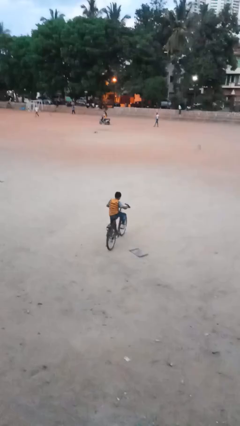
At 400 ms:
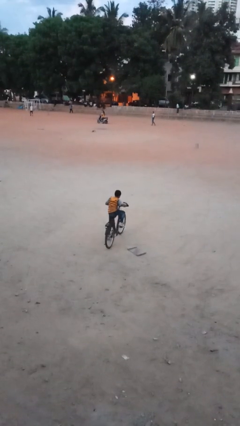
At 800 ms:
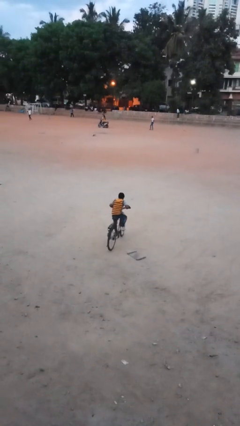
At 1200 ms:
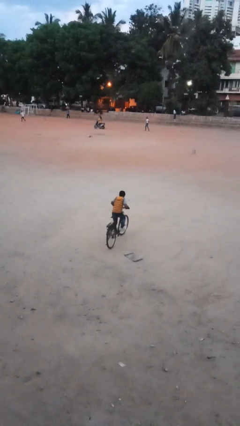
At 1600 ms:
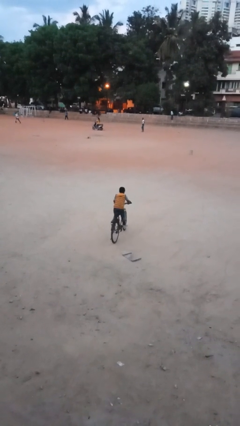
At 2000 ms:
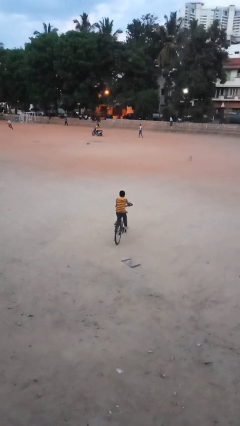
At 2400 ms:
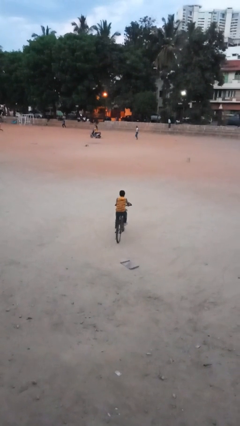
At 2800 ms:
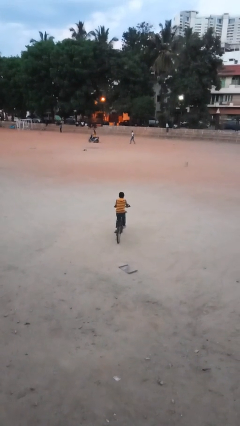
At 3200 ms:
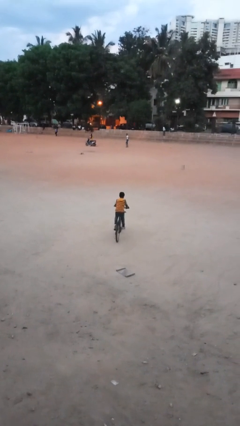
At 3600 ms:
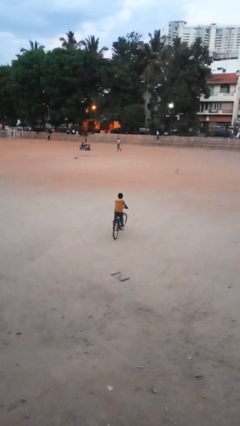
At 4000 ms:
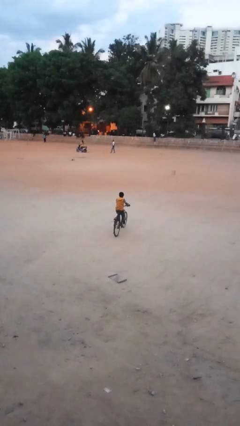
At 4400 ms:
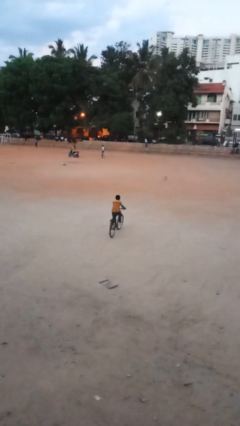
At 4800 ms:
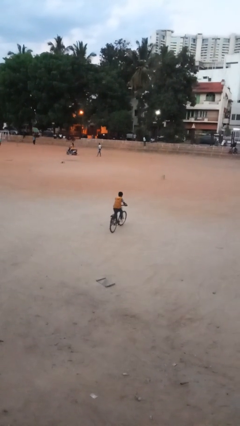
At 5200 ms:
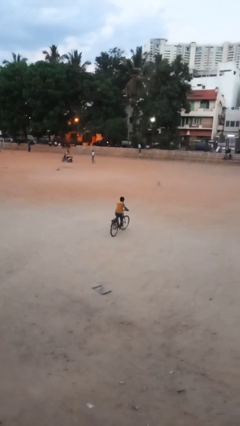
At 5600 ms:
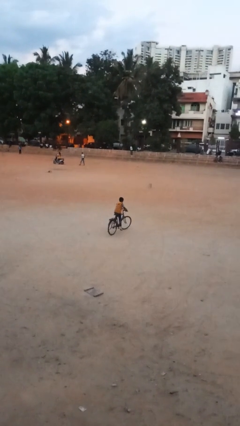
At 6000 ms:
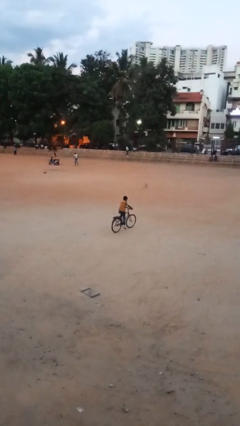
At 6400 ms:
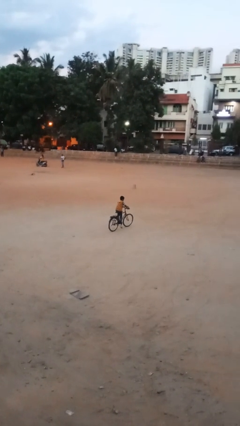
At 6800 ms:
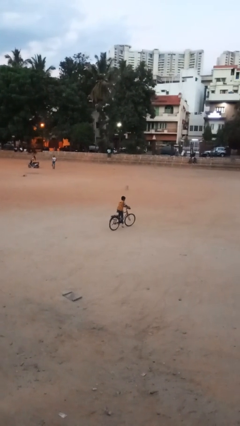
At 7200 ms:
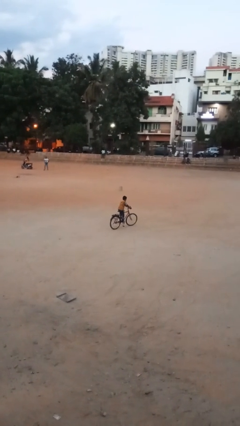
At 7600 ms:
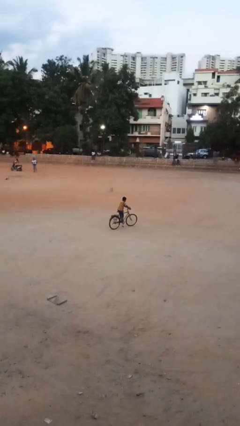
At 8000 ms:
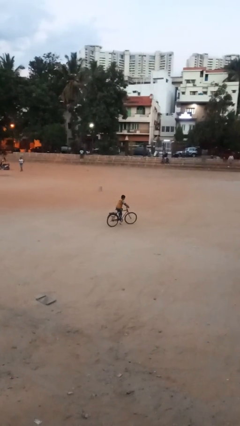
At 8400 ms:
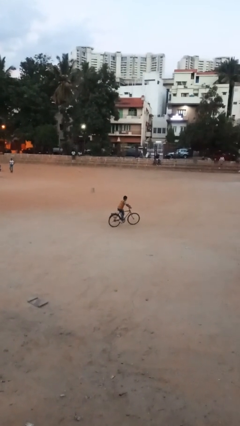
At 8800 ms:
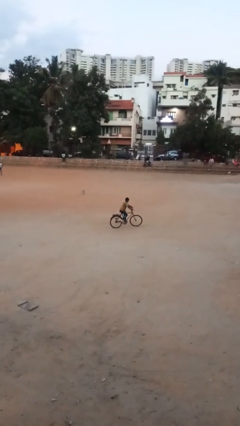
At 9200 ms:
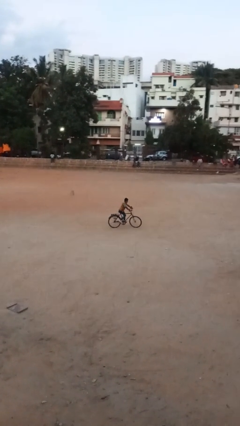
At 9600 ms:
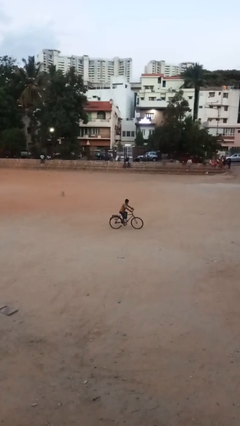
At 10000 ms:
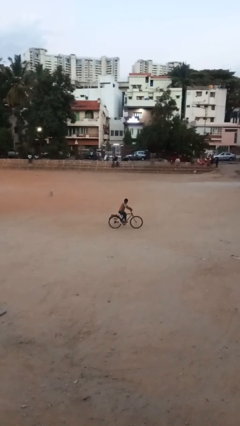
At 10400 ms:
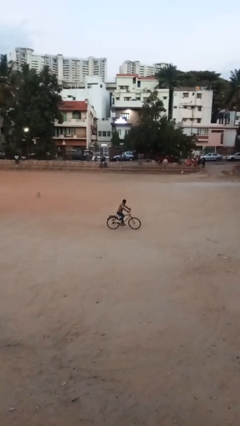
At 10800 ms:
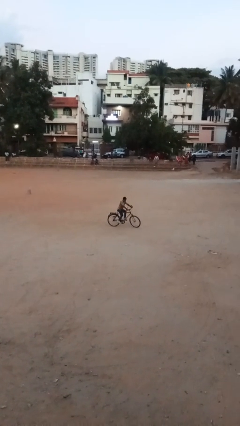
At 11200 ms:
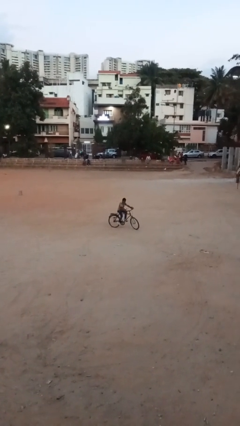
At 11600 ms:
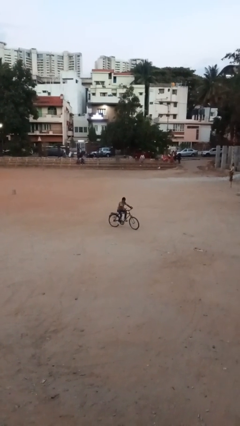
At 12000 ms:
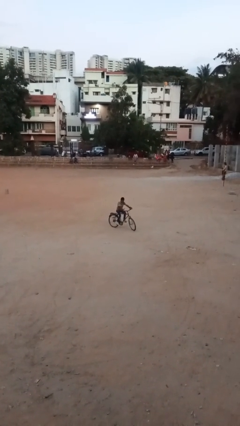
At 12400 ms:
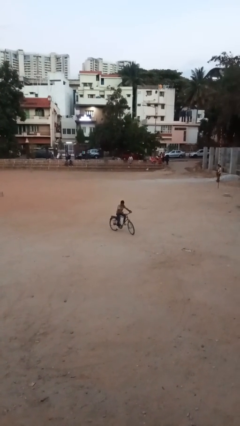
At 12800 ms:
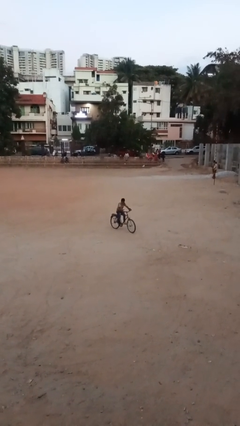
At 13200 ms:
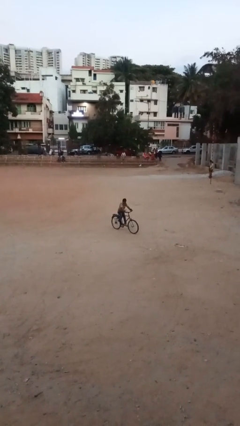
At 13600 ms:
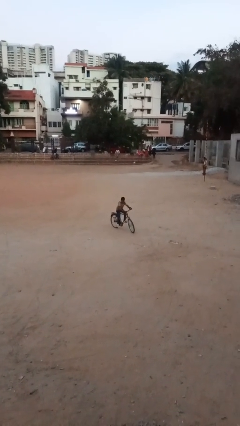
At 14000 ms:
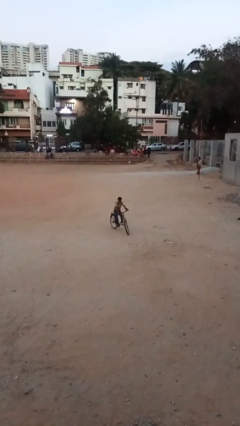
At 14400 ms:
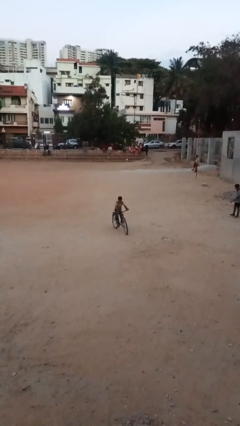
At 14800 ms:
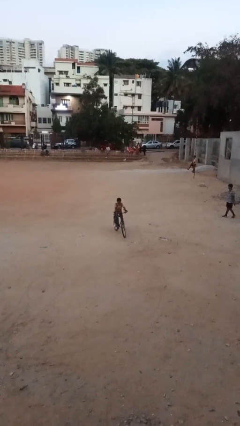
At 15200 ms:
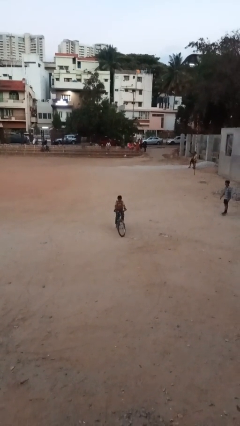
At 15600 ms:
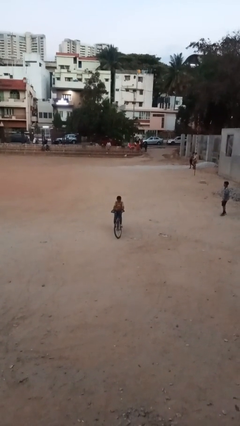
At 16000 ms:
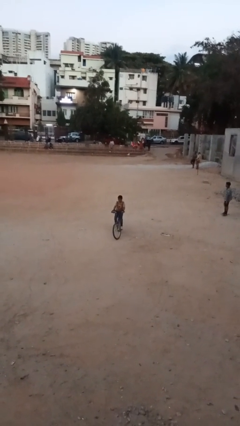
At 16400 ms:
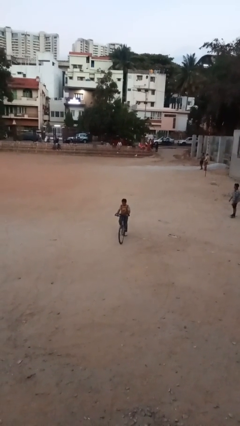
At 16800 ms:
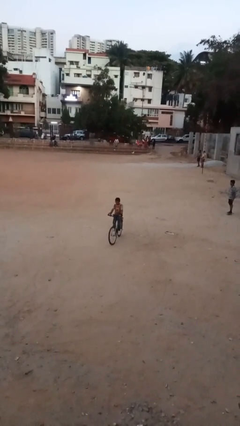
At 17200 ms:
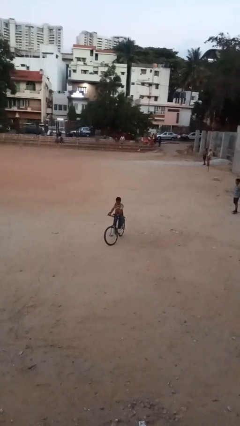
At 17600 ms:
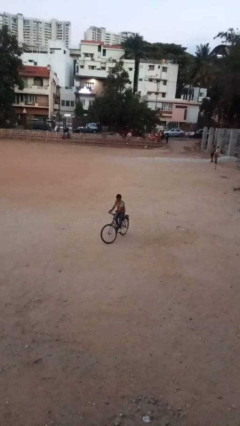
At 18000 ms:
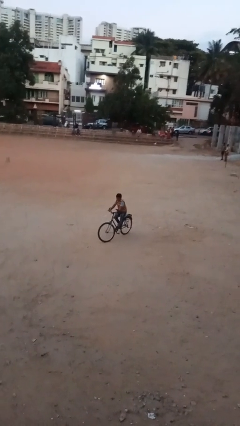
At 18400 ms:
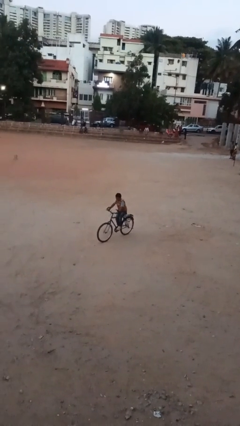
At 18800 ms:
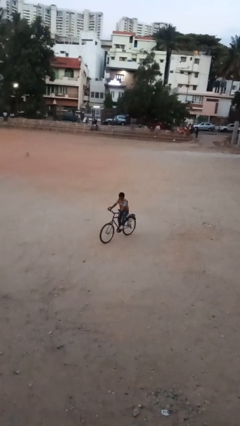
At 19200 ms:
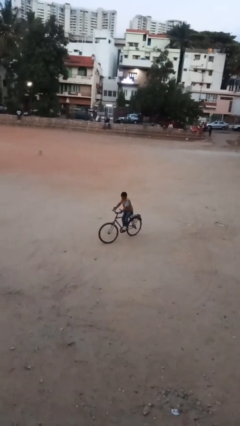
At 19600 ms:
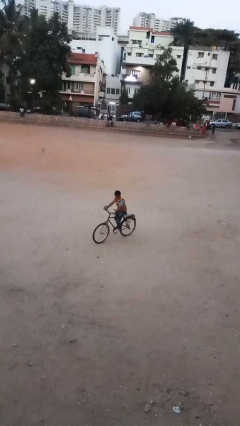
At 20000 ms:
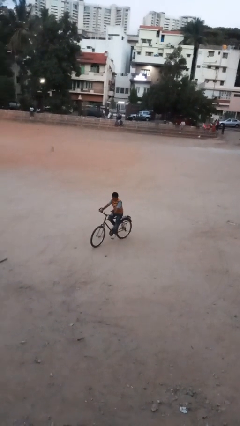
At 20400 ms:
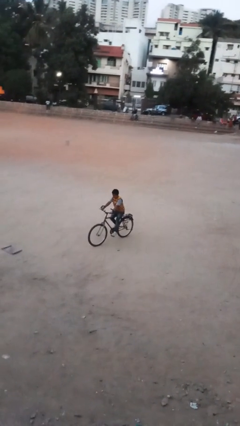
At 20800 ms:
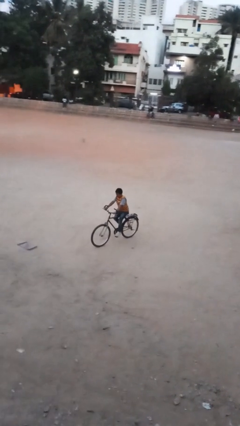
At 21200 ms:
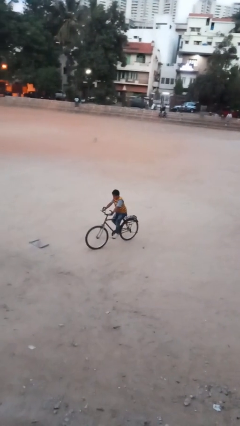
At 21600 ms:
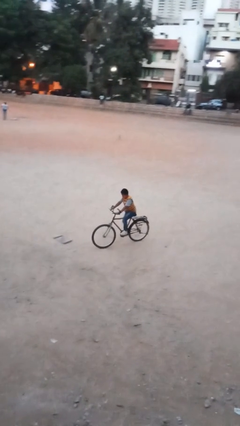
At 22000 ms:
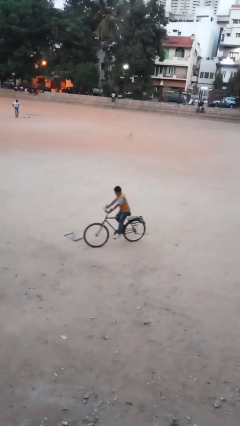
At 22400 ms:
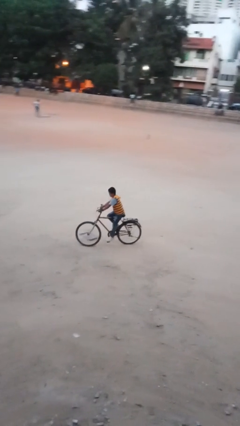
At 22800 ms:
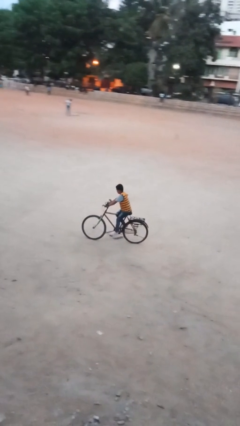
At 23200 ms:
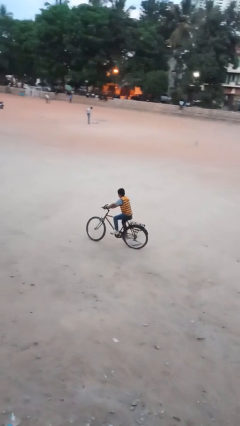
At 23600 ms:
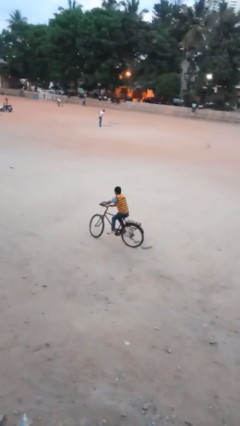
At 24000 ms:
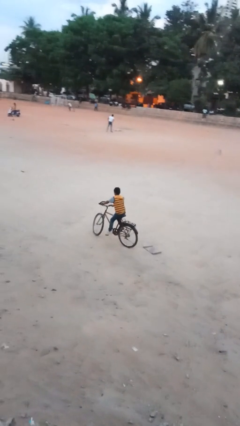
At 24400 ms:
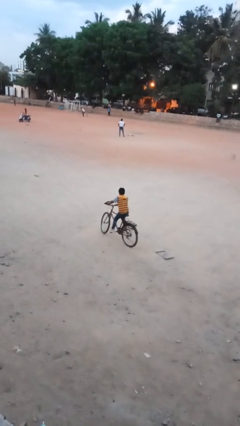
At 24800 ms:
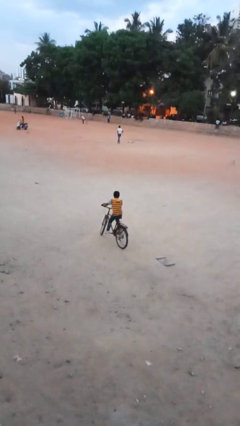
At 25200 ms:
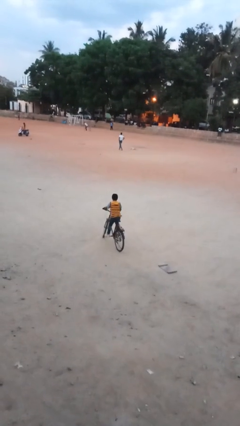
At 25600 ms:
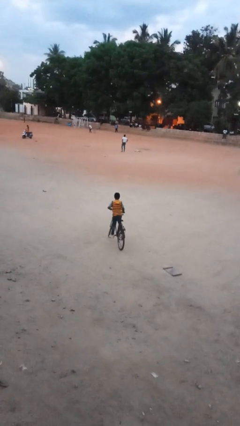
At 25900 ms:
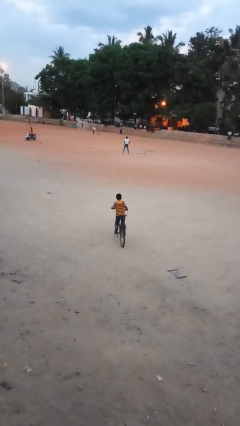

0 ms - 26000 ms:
person rides bicycle

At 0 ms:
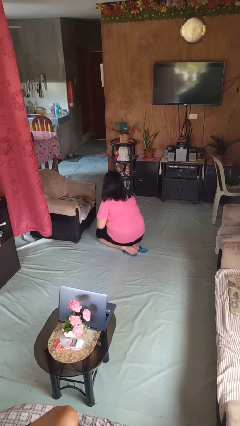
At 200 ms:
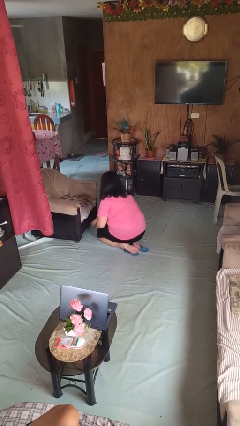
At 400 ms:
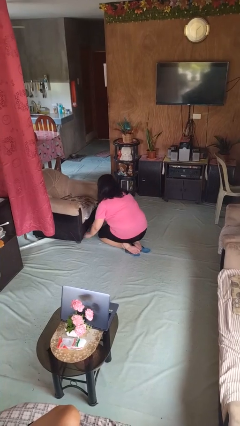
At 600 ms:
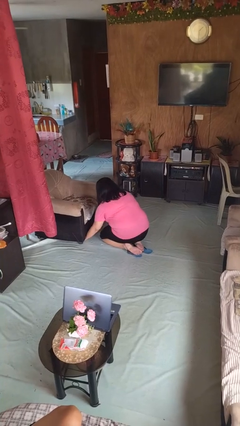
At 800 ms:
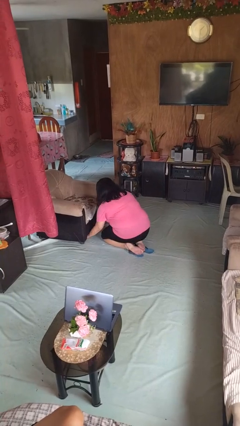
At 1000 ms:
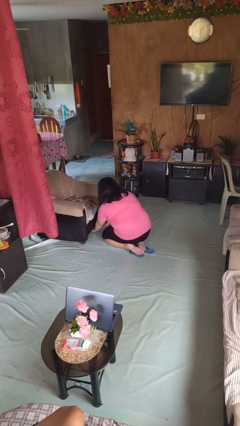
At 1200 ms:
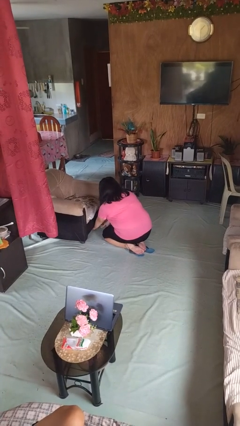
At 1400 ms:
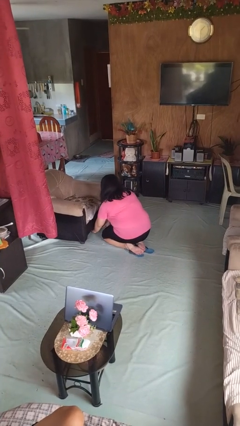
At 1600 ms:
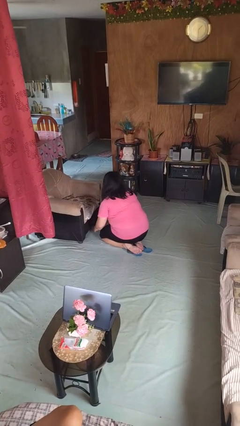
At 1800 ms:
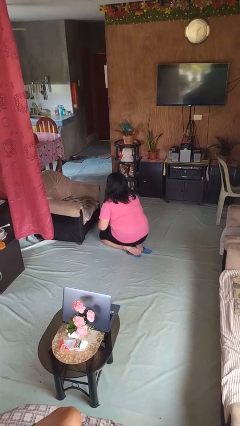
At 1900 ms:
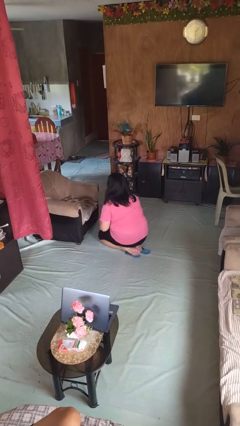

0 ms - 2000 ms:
person searches under couch

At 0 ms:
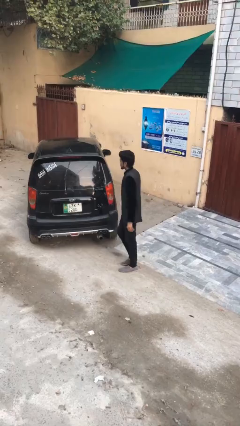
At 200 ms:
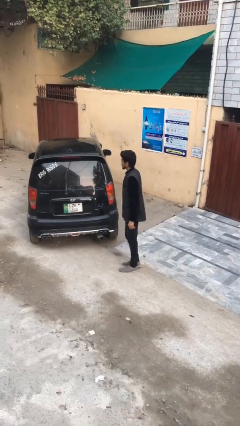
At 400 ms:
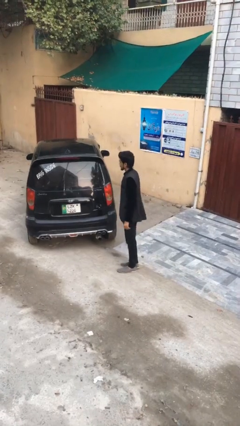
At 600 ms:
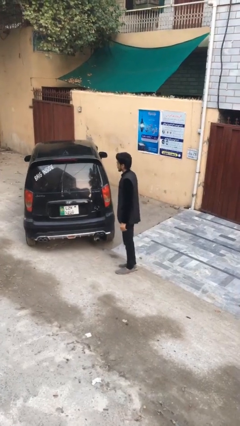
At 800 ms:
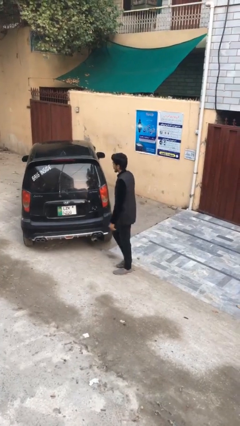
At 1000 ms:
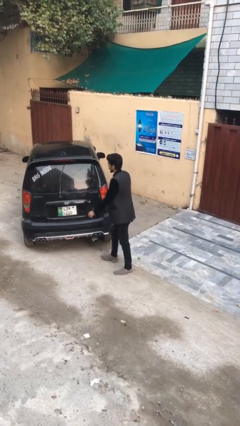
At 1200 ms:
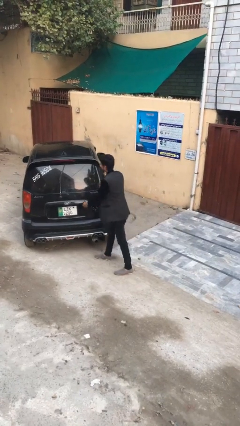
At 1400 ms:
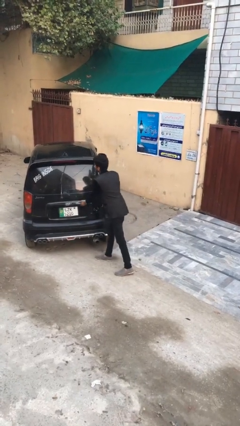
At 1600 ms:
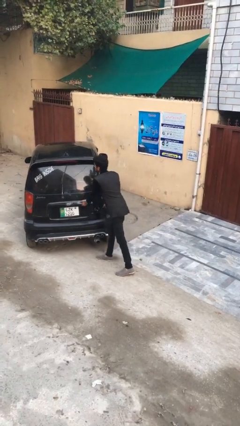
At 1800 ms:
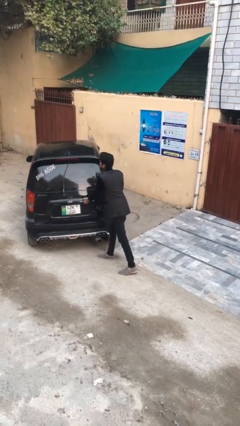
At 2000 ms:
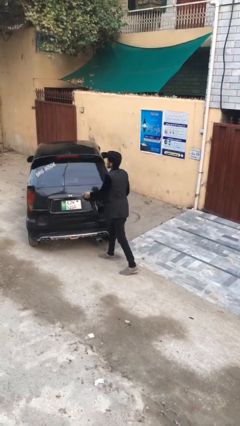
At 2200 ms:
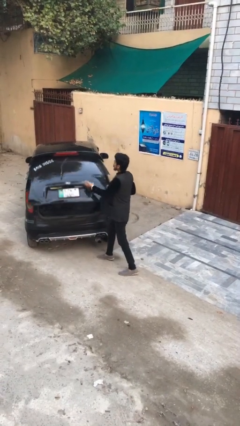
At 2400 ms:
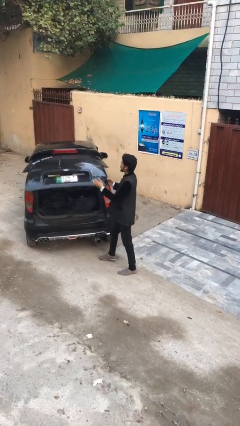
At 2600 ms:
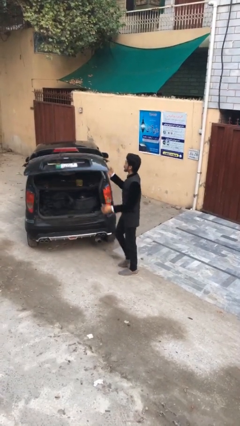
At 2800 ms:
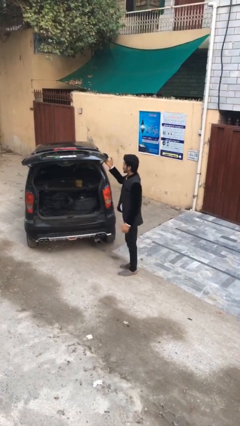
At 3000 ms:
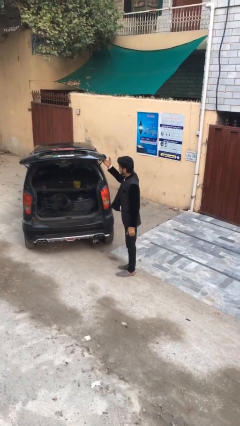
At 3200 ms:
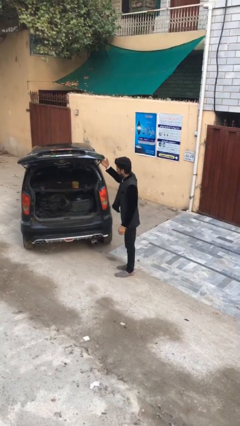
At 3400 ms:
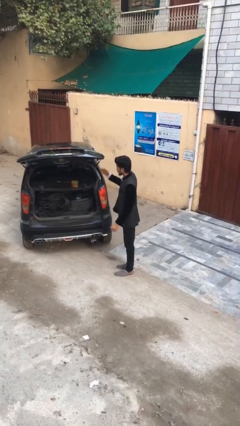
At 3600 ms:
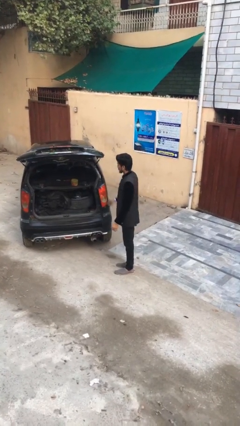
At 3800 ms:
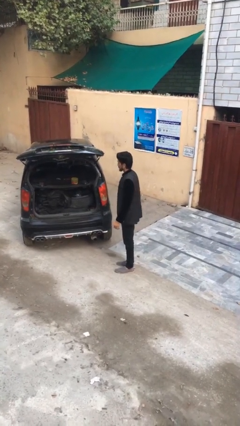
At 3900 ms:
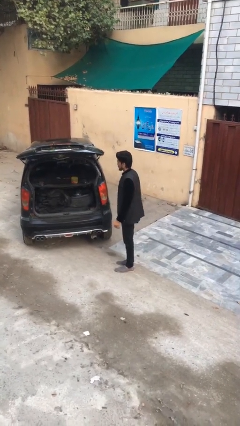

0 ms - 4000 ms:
person opens car trunk
